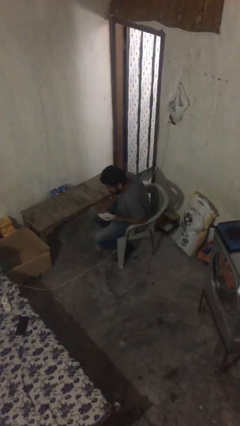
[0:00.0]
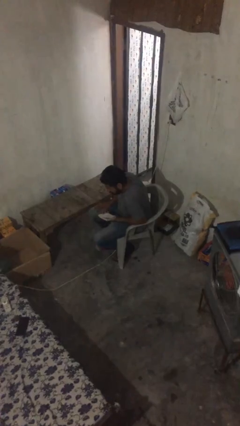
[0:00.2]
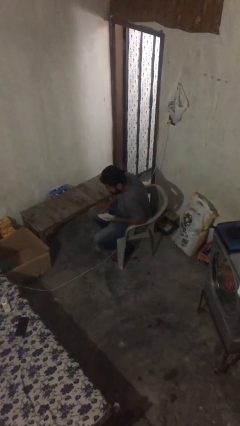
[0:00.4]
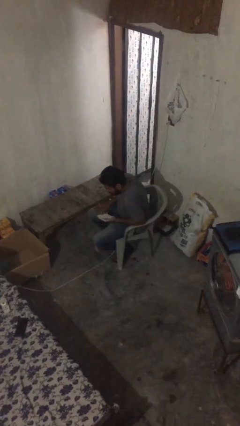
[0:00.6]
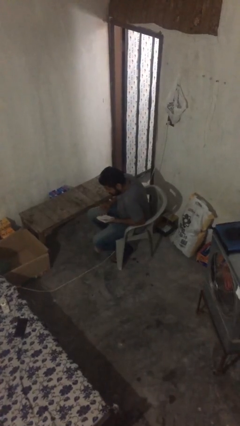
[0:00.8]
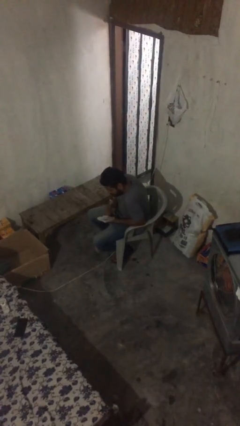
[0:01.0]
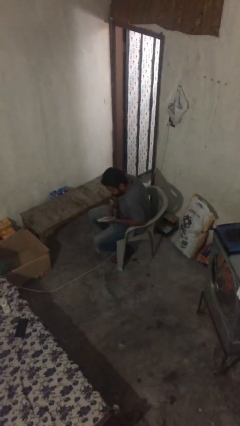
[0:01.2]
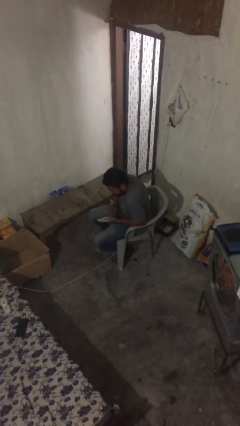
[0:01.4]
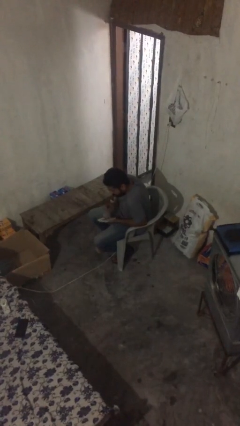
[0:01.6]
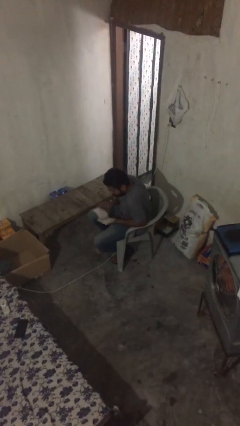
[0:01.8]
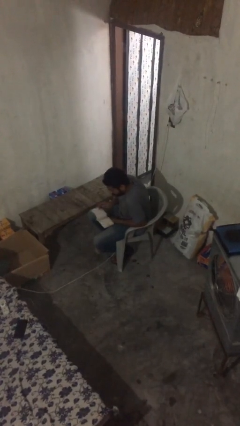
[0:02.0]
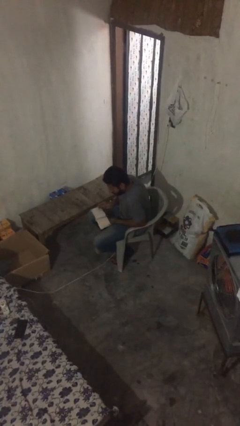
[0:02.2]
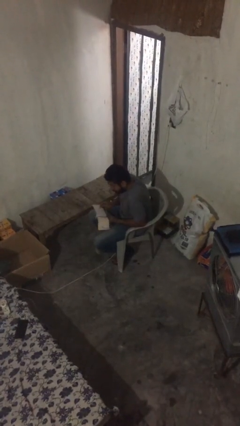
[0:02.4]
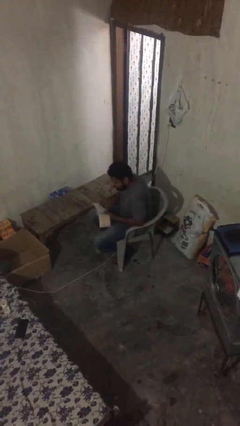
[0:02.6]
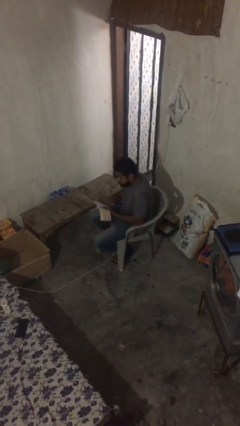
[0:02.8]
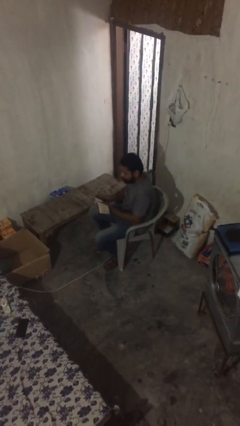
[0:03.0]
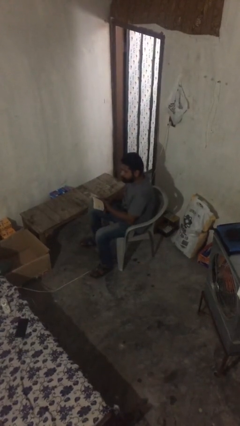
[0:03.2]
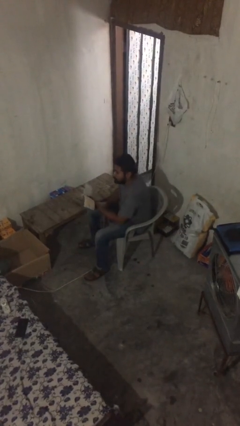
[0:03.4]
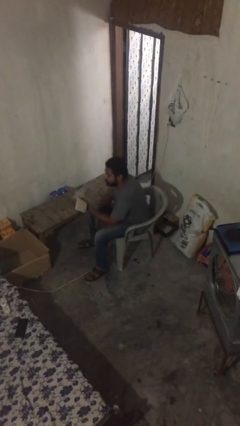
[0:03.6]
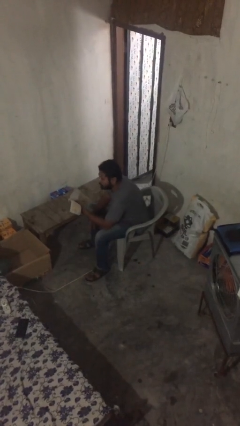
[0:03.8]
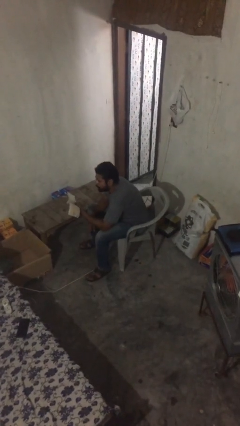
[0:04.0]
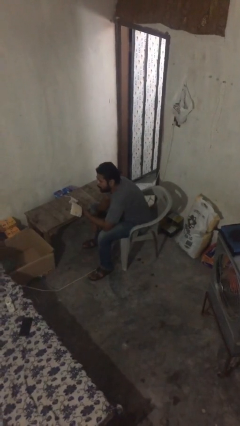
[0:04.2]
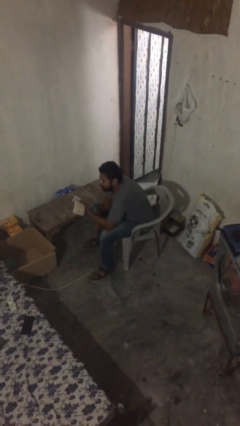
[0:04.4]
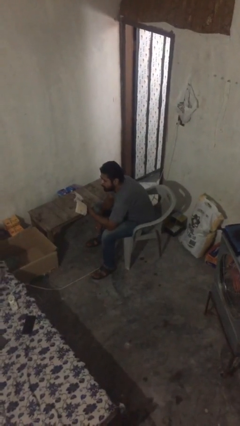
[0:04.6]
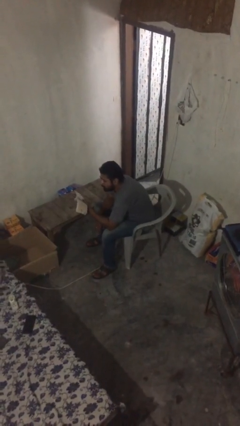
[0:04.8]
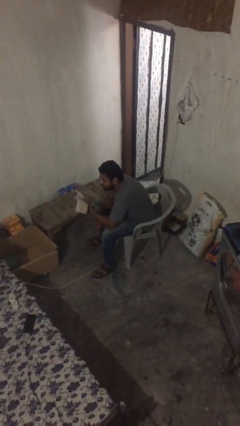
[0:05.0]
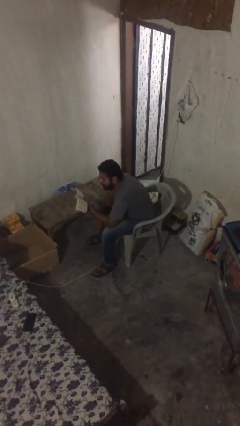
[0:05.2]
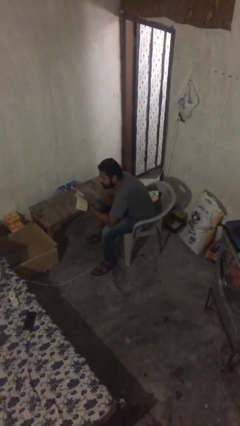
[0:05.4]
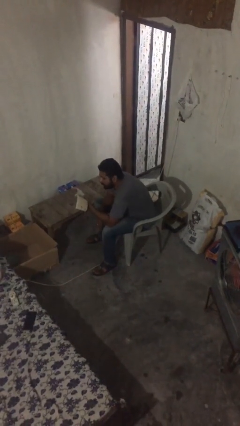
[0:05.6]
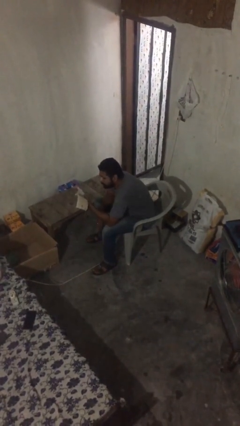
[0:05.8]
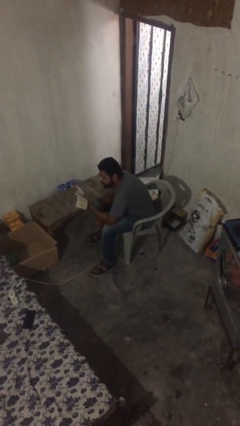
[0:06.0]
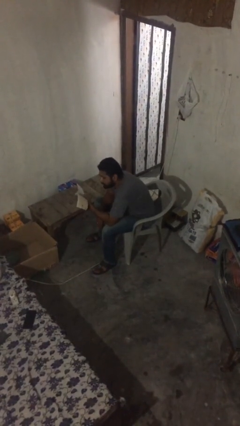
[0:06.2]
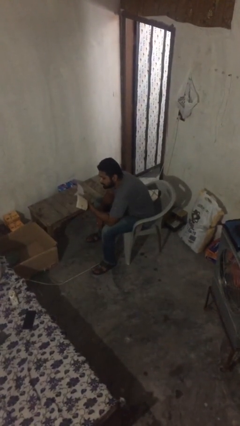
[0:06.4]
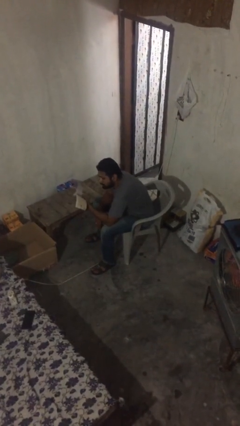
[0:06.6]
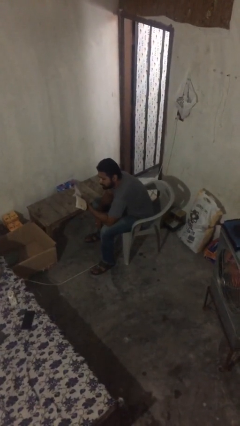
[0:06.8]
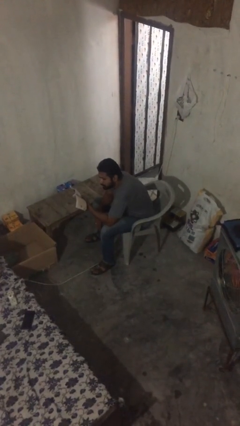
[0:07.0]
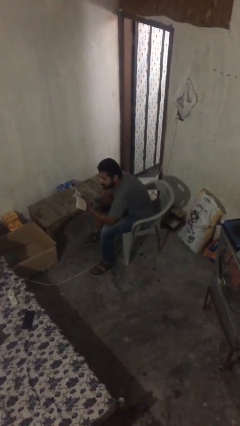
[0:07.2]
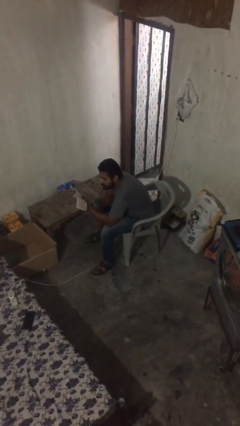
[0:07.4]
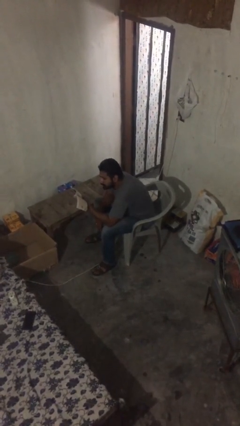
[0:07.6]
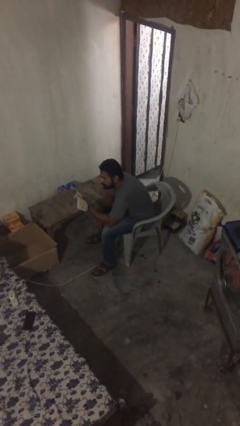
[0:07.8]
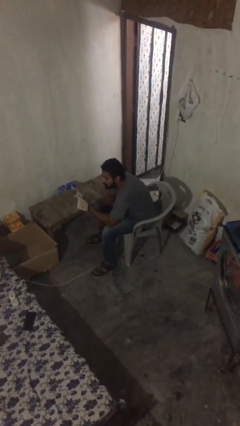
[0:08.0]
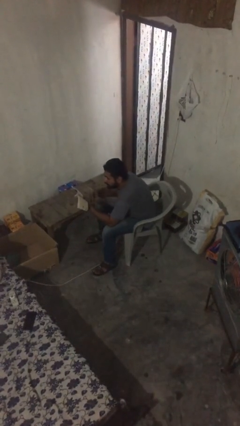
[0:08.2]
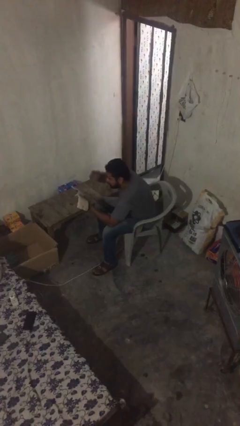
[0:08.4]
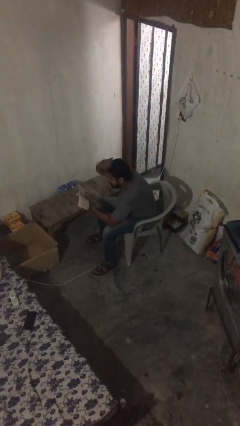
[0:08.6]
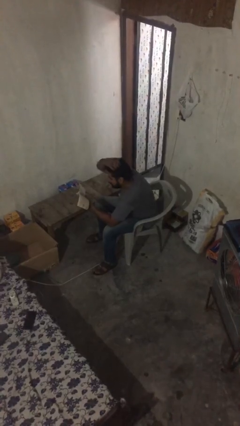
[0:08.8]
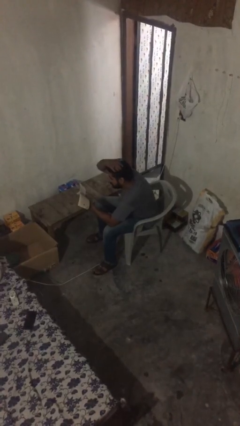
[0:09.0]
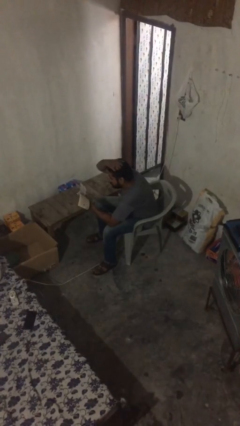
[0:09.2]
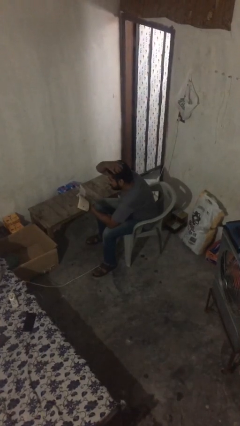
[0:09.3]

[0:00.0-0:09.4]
person reads document

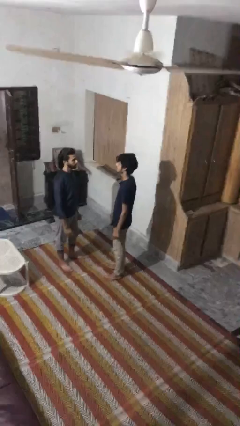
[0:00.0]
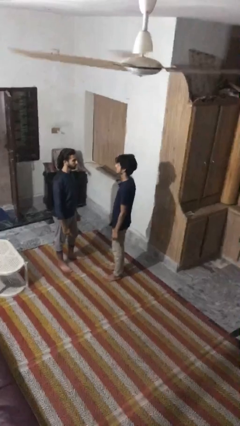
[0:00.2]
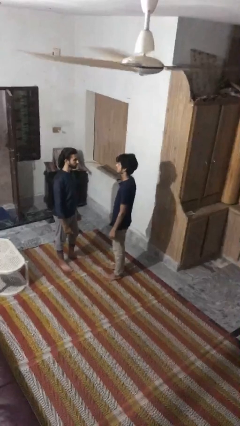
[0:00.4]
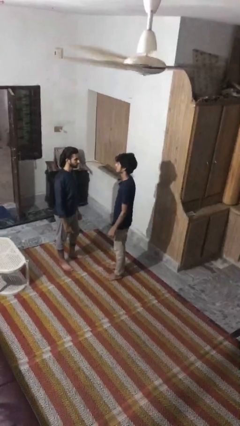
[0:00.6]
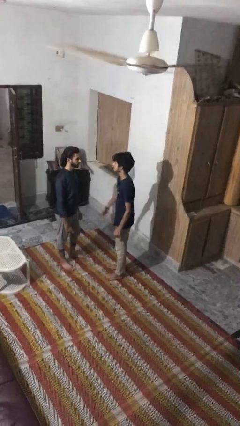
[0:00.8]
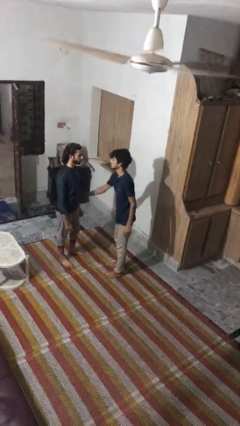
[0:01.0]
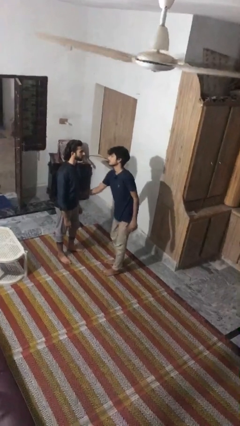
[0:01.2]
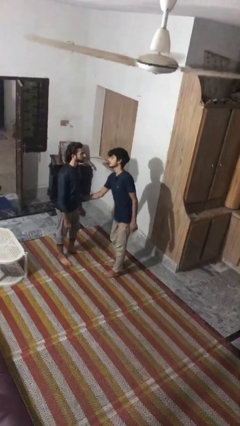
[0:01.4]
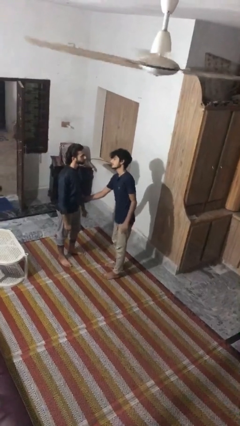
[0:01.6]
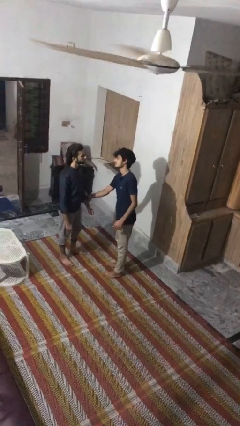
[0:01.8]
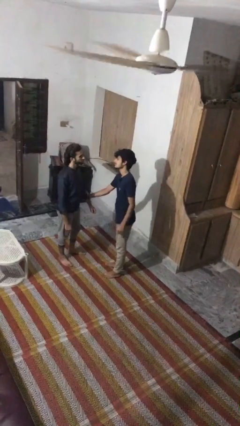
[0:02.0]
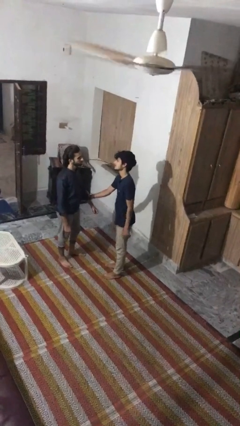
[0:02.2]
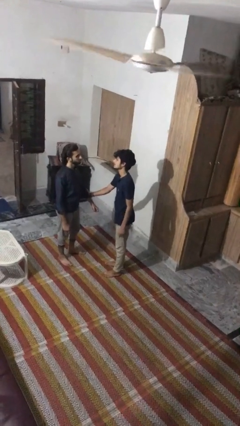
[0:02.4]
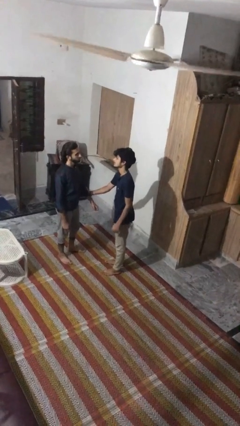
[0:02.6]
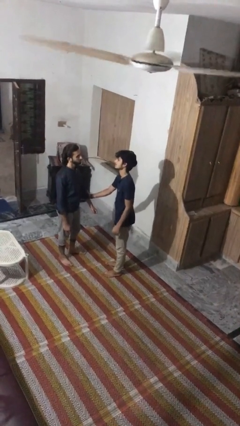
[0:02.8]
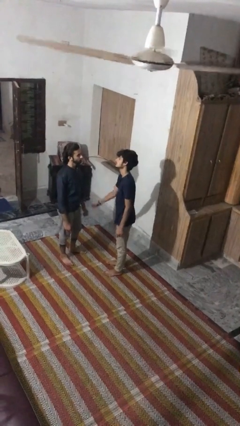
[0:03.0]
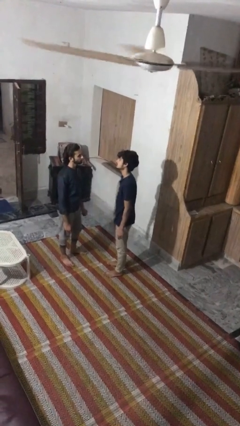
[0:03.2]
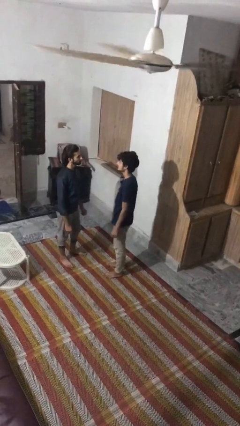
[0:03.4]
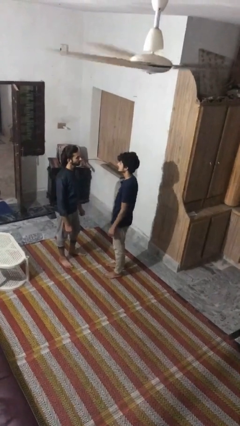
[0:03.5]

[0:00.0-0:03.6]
person grabs person by forearm

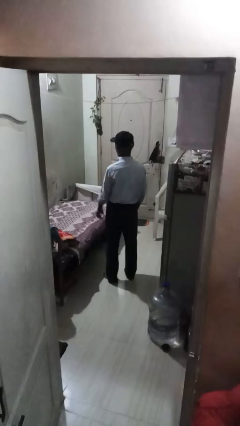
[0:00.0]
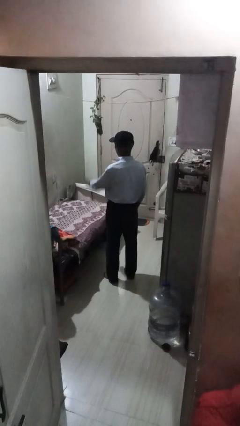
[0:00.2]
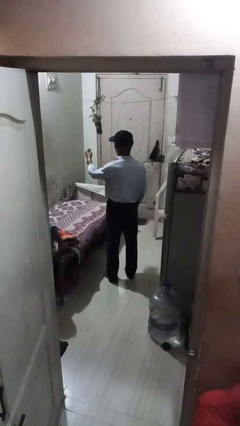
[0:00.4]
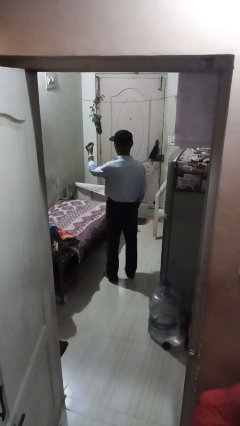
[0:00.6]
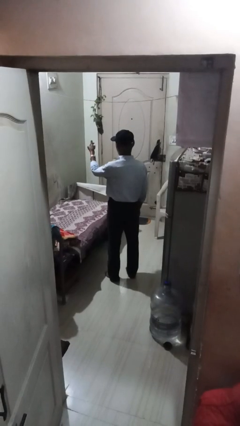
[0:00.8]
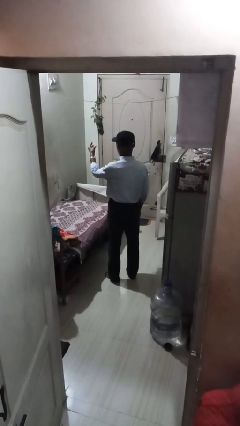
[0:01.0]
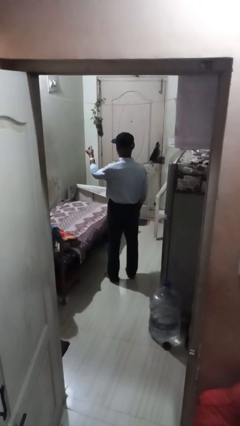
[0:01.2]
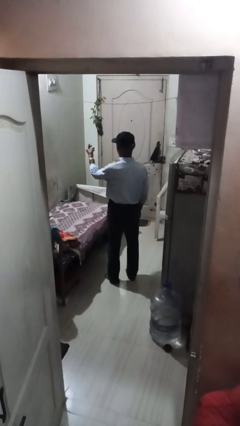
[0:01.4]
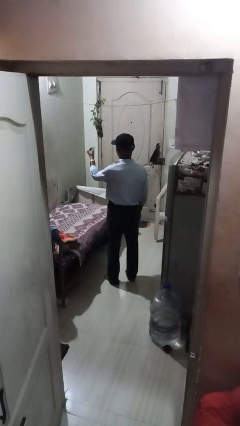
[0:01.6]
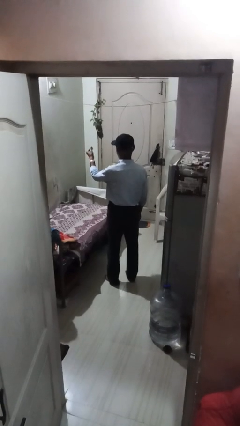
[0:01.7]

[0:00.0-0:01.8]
person snaps fingers

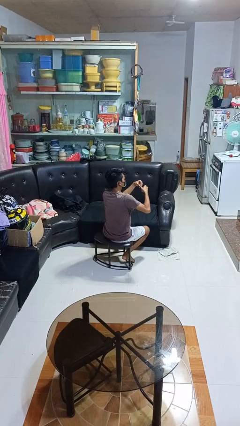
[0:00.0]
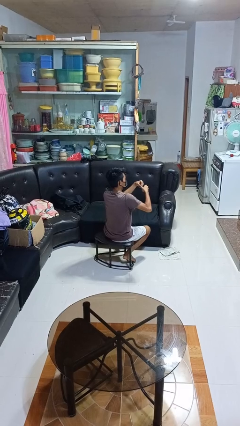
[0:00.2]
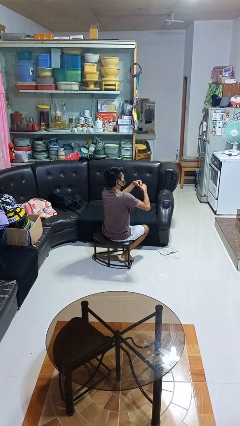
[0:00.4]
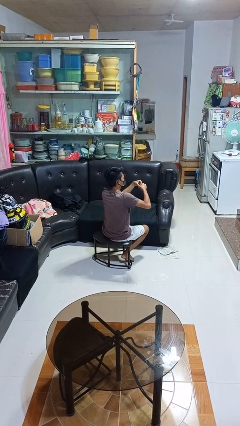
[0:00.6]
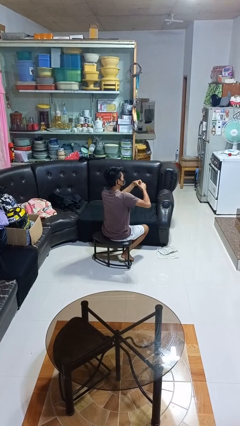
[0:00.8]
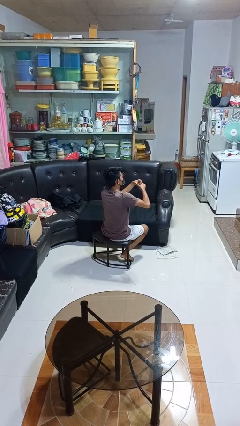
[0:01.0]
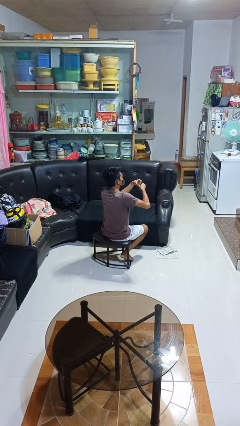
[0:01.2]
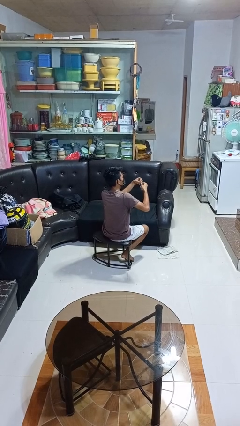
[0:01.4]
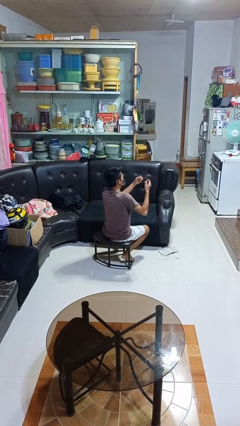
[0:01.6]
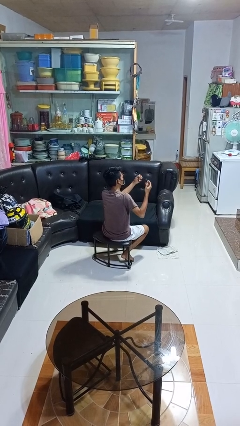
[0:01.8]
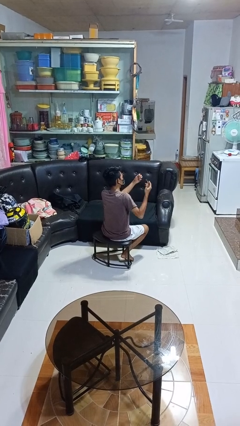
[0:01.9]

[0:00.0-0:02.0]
person clips fingernails

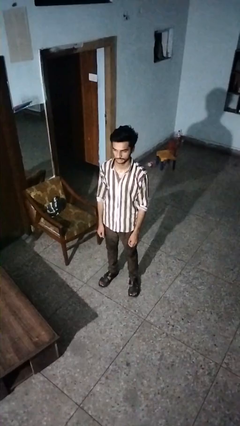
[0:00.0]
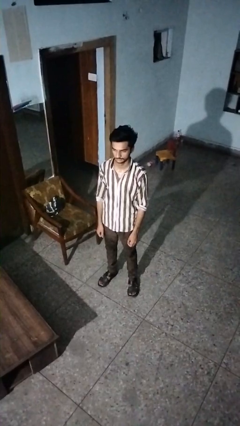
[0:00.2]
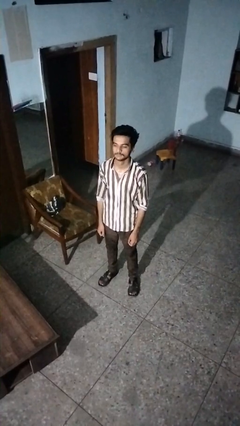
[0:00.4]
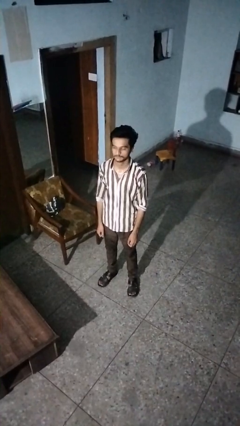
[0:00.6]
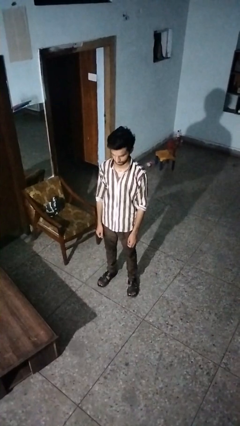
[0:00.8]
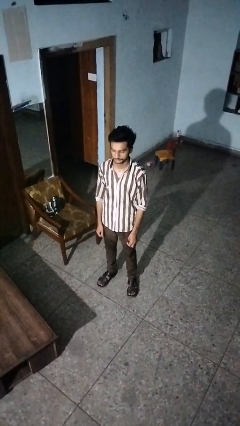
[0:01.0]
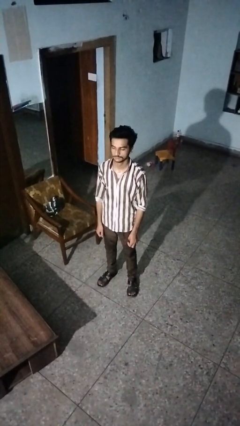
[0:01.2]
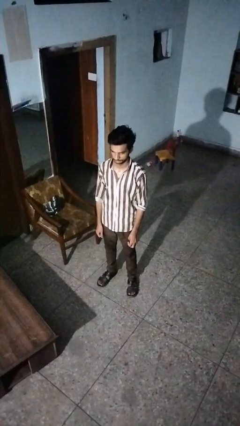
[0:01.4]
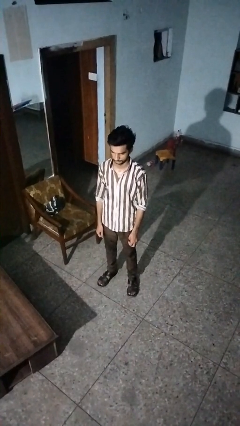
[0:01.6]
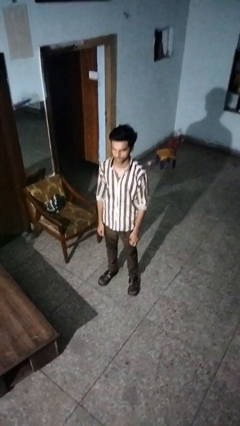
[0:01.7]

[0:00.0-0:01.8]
person nods head
